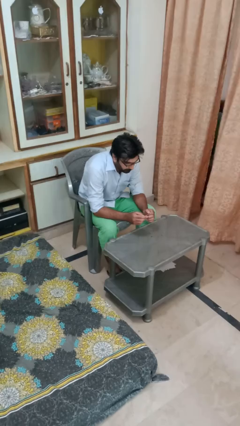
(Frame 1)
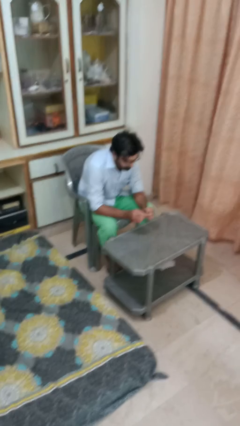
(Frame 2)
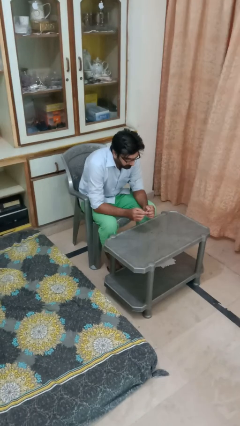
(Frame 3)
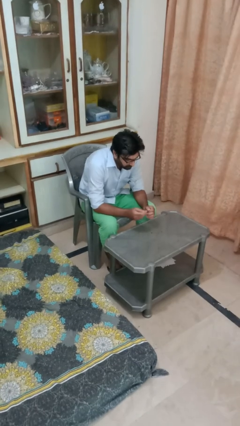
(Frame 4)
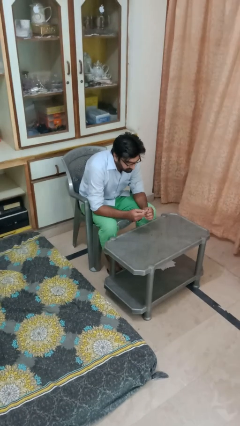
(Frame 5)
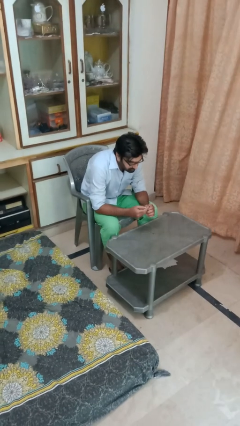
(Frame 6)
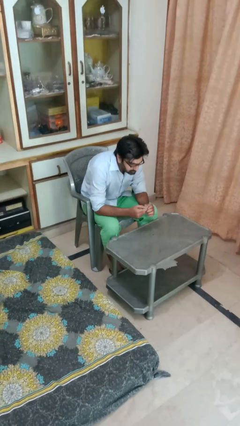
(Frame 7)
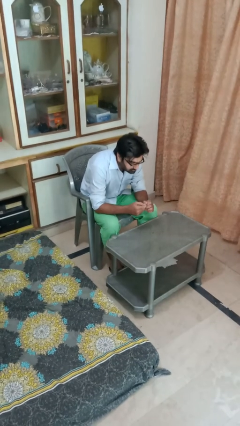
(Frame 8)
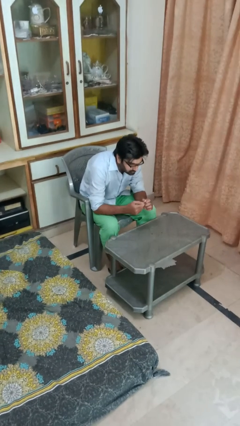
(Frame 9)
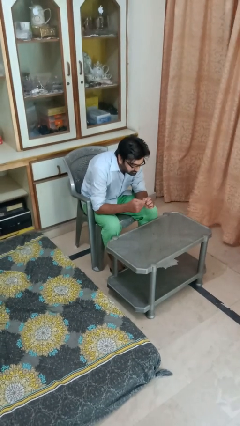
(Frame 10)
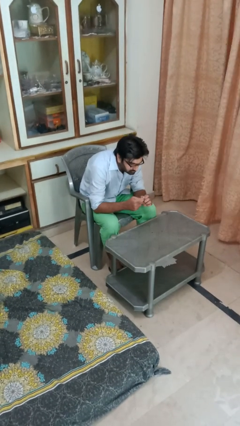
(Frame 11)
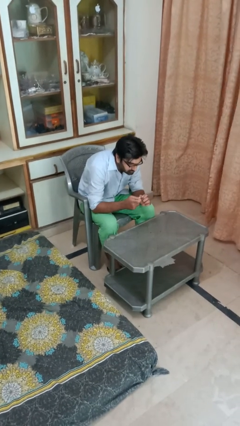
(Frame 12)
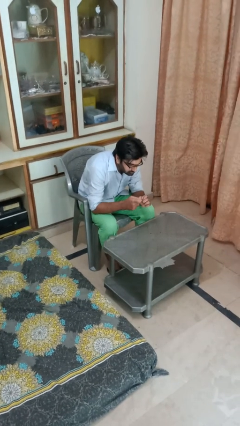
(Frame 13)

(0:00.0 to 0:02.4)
person files fingernails

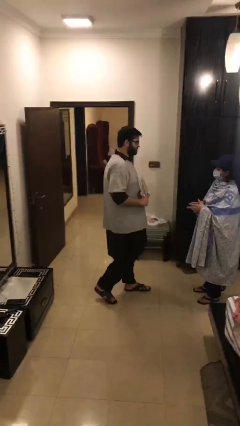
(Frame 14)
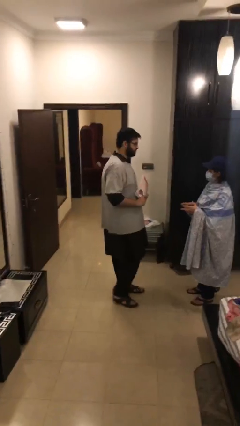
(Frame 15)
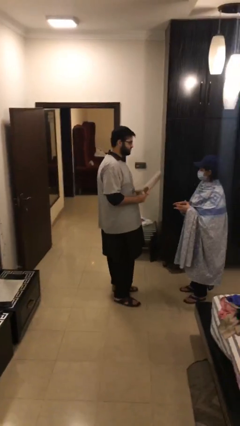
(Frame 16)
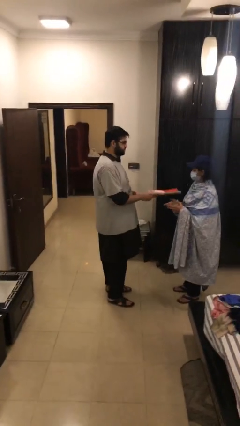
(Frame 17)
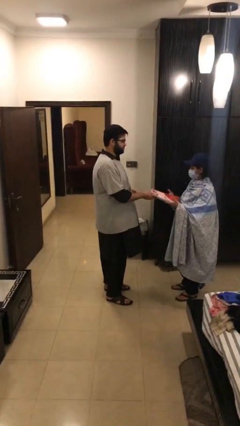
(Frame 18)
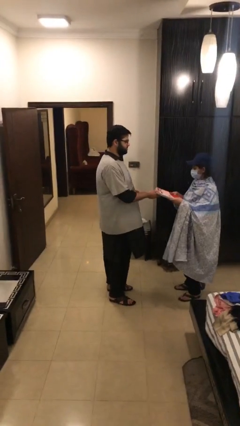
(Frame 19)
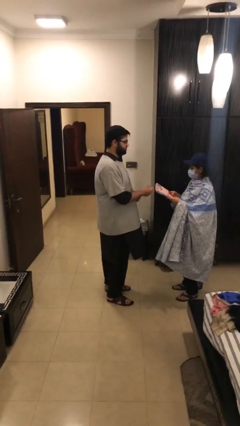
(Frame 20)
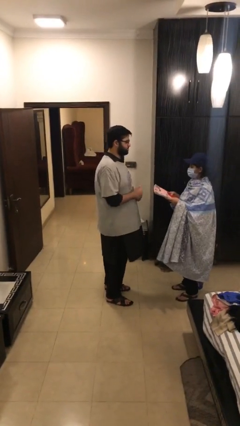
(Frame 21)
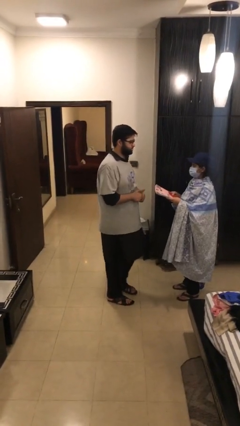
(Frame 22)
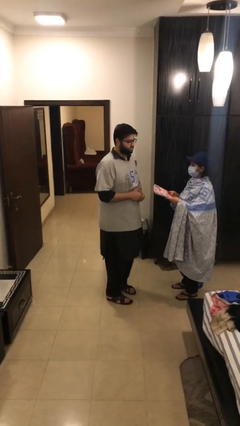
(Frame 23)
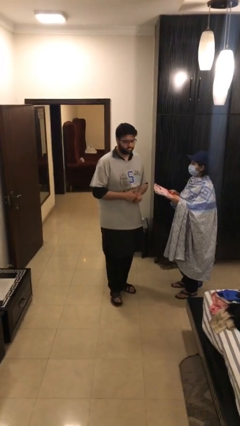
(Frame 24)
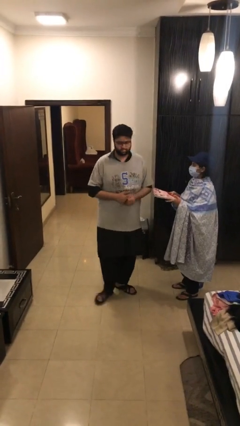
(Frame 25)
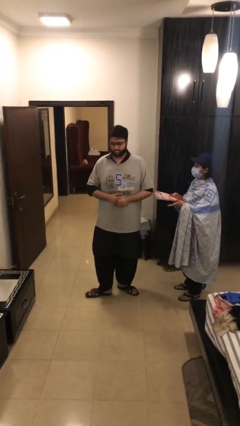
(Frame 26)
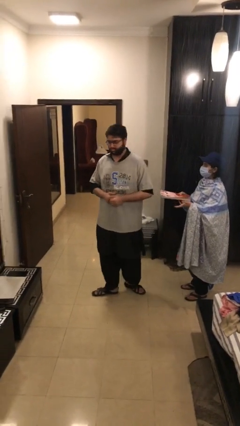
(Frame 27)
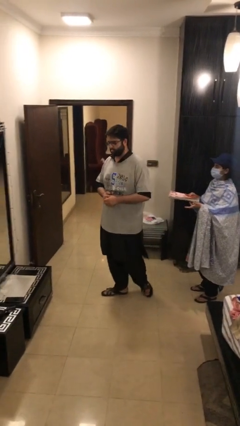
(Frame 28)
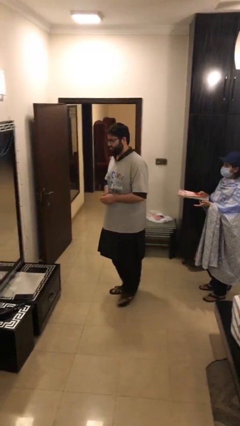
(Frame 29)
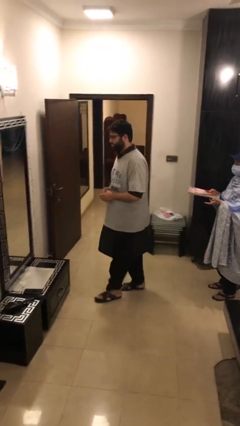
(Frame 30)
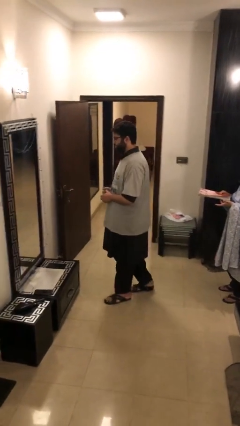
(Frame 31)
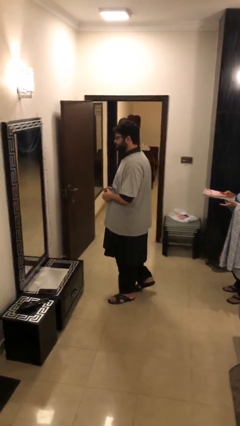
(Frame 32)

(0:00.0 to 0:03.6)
person transfers object to person

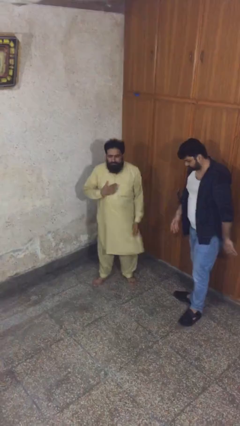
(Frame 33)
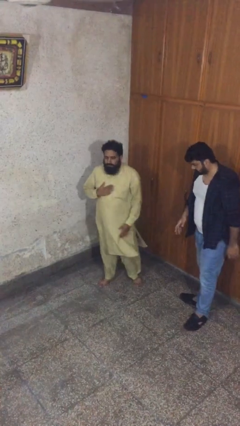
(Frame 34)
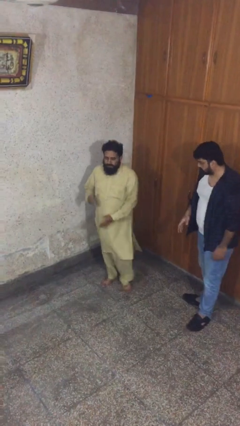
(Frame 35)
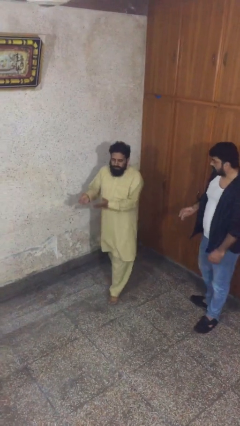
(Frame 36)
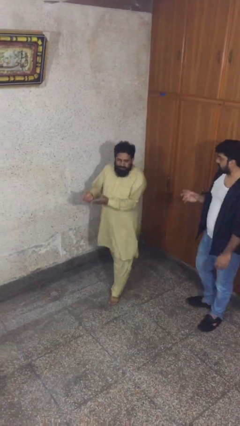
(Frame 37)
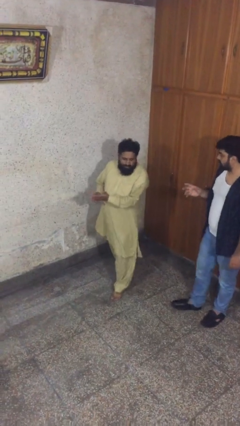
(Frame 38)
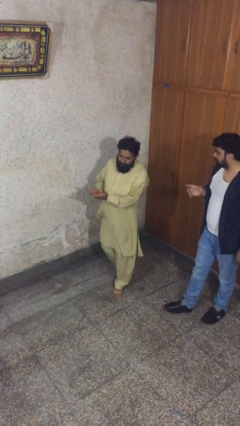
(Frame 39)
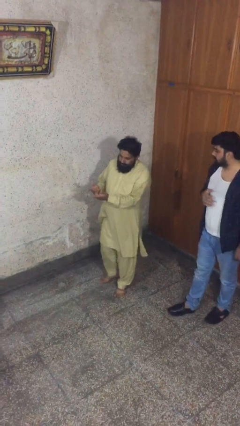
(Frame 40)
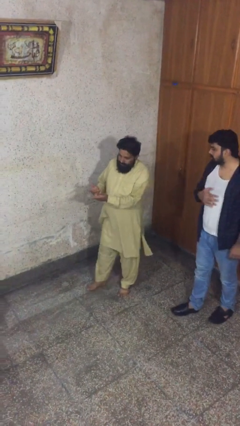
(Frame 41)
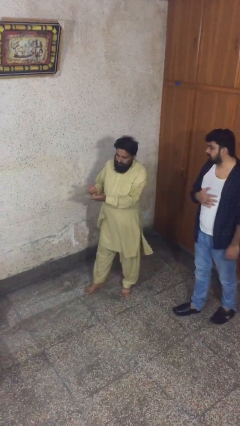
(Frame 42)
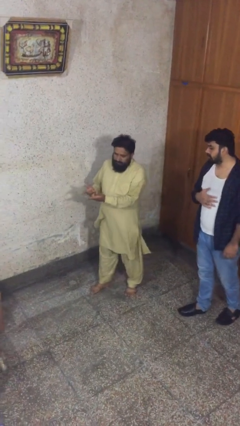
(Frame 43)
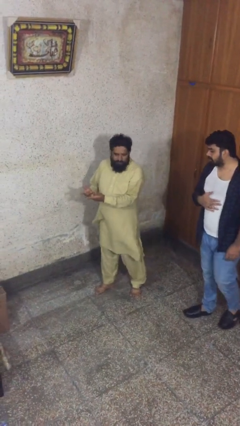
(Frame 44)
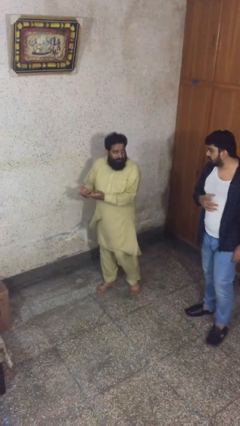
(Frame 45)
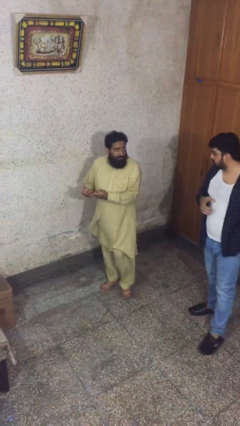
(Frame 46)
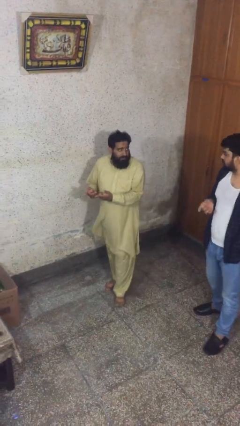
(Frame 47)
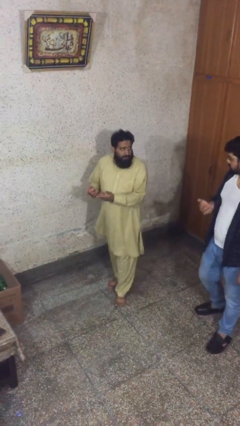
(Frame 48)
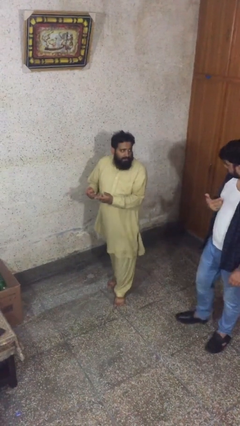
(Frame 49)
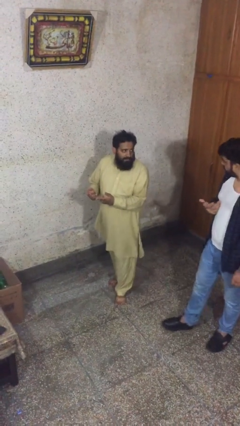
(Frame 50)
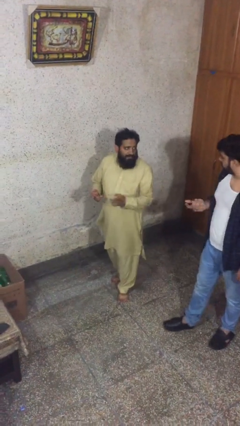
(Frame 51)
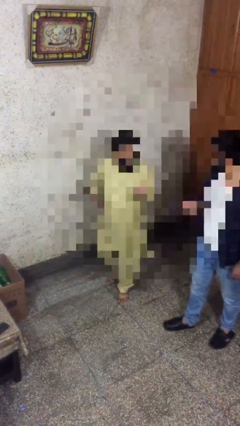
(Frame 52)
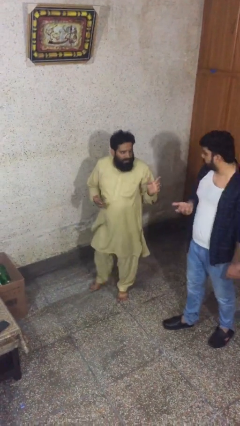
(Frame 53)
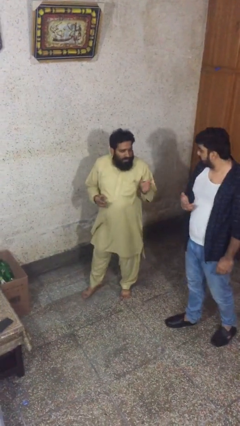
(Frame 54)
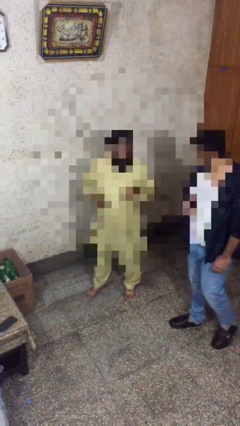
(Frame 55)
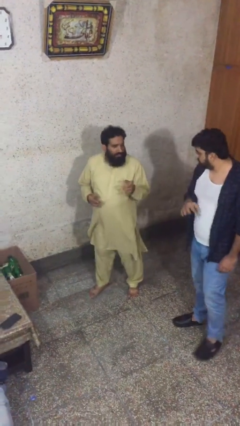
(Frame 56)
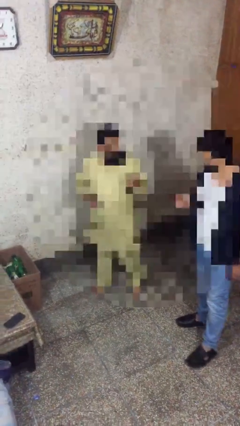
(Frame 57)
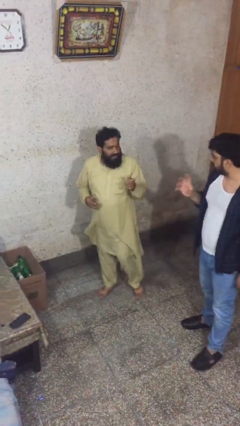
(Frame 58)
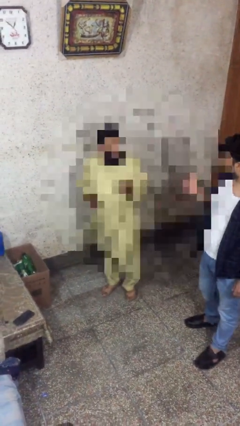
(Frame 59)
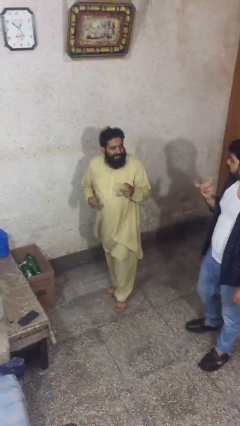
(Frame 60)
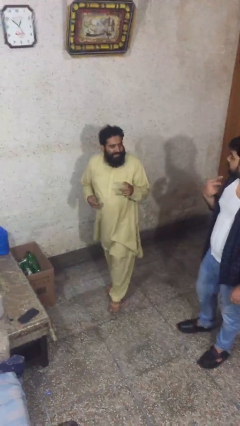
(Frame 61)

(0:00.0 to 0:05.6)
person talks to person

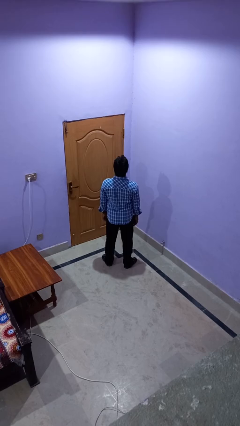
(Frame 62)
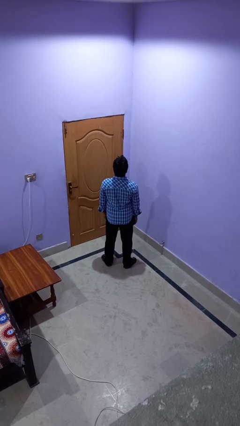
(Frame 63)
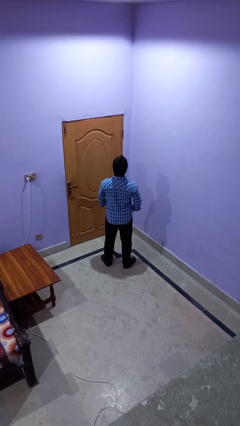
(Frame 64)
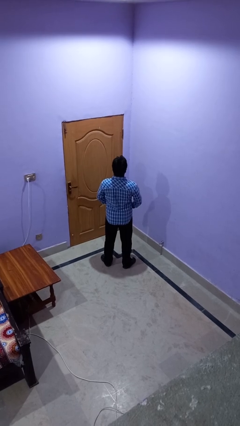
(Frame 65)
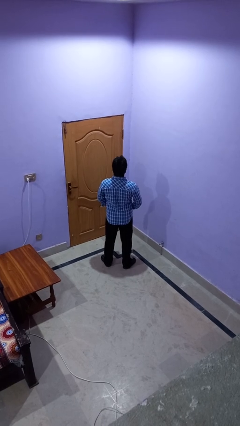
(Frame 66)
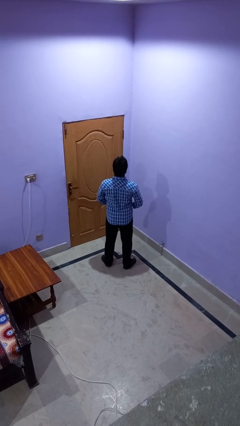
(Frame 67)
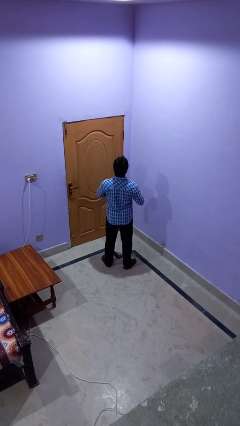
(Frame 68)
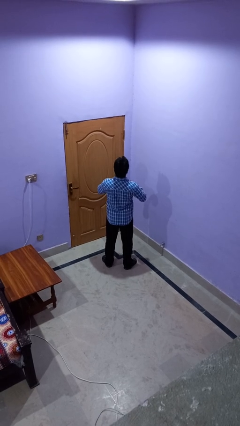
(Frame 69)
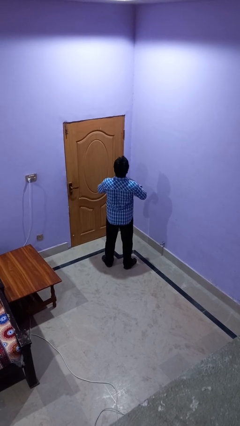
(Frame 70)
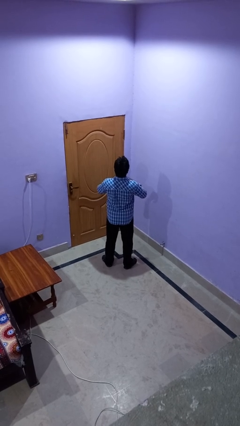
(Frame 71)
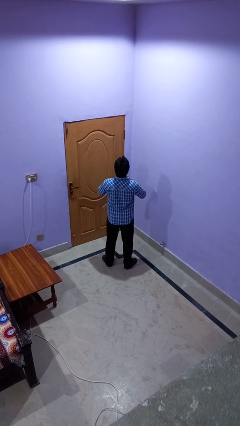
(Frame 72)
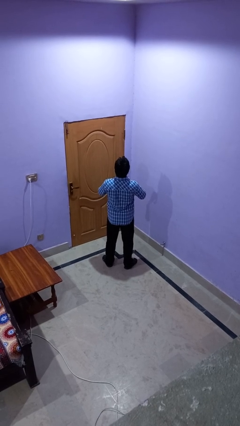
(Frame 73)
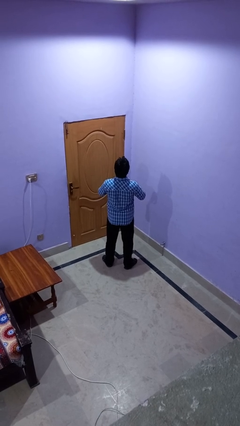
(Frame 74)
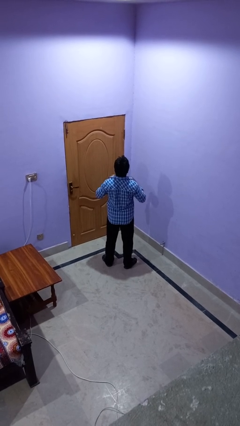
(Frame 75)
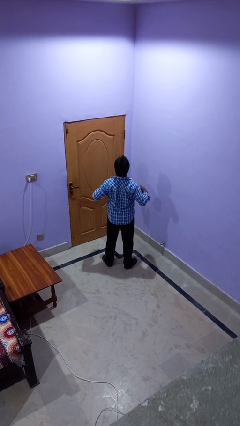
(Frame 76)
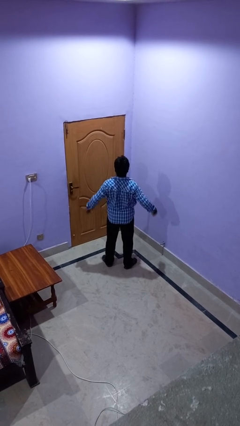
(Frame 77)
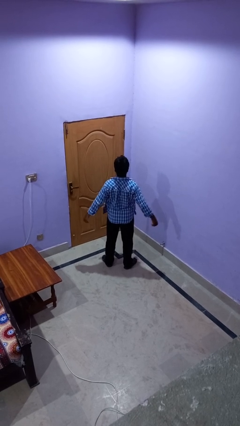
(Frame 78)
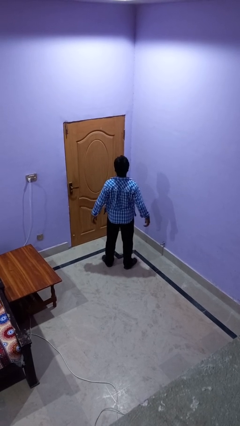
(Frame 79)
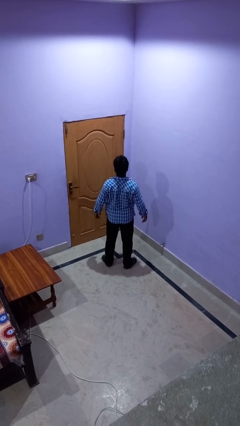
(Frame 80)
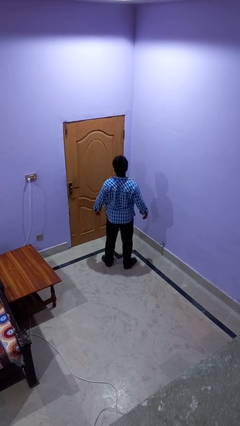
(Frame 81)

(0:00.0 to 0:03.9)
person unbuttons shirt

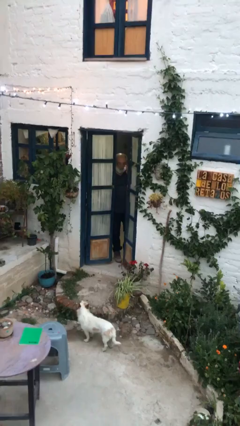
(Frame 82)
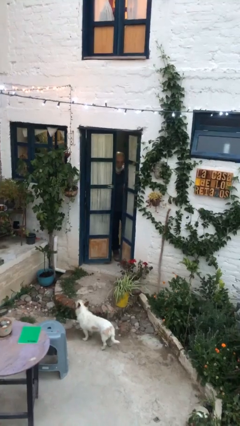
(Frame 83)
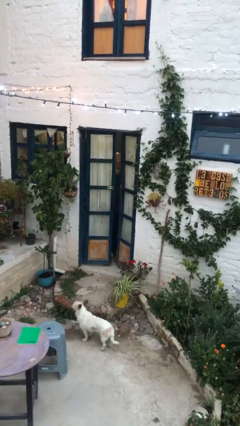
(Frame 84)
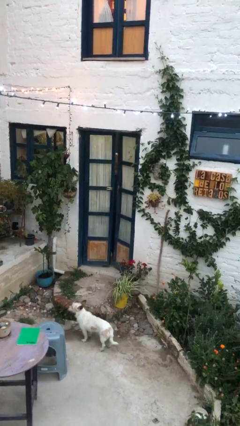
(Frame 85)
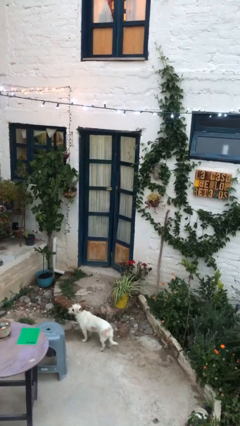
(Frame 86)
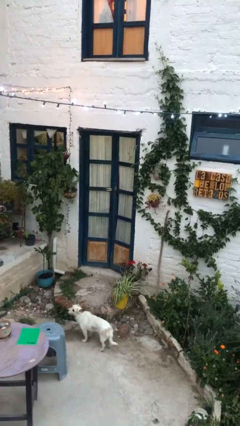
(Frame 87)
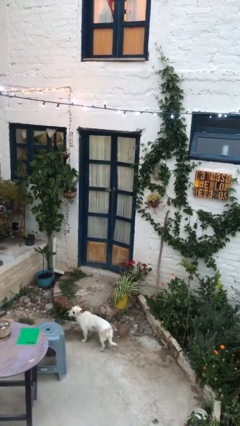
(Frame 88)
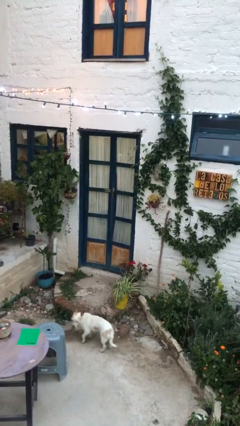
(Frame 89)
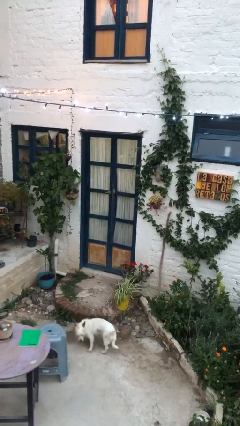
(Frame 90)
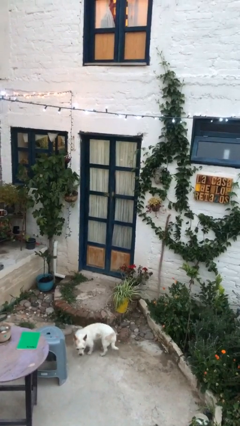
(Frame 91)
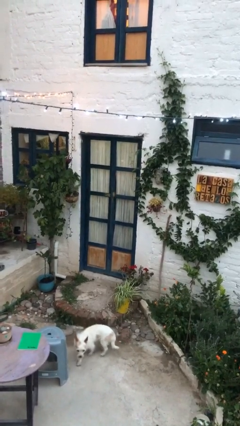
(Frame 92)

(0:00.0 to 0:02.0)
person closes facility door

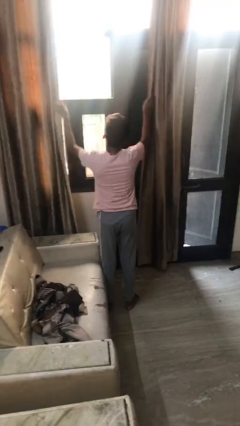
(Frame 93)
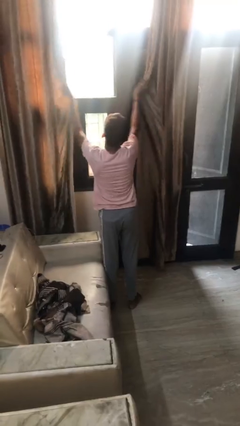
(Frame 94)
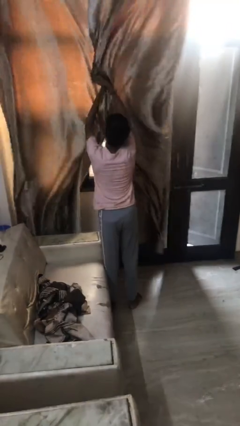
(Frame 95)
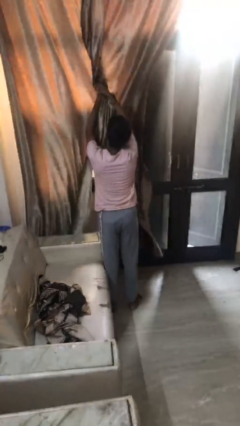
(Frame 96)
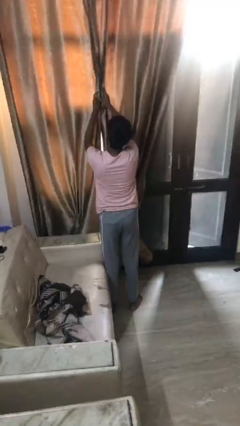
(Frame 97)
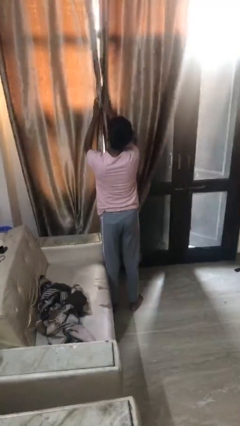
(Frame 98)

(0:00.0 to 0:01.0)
person closes curtains
